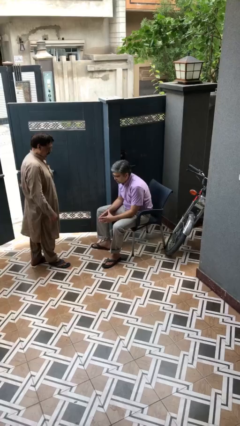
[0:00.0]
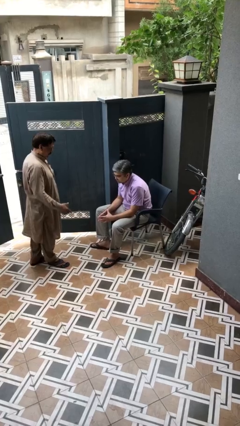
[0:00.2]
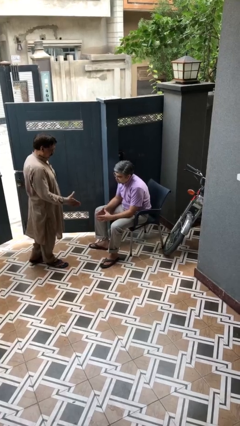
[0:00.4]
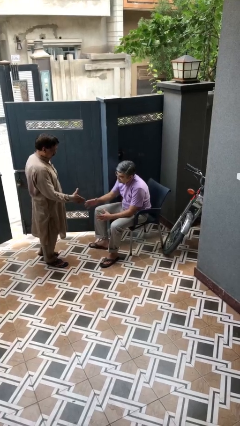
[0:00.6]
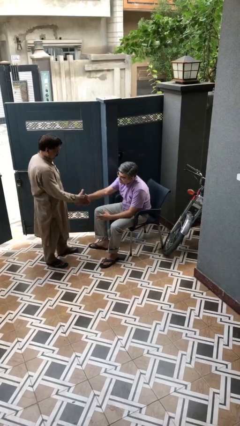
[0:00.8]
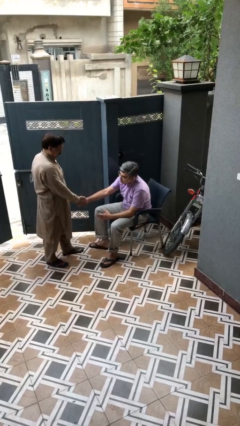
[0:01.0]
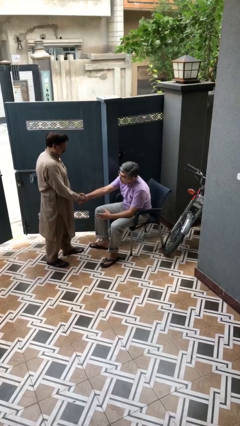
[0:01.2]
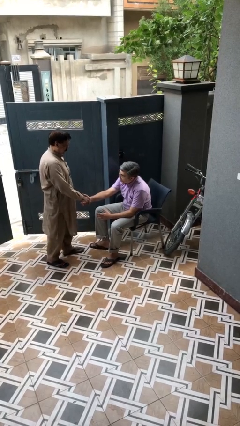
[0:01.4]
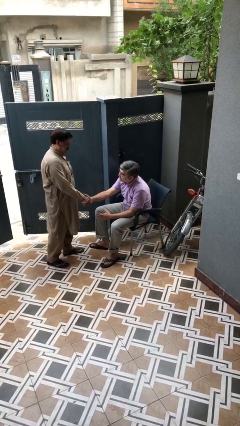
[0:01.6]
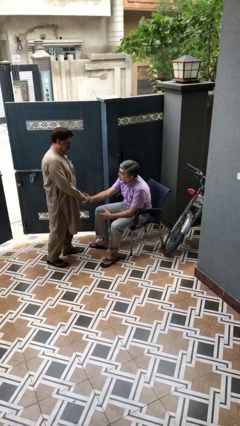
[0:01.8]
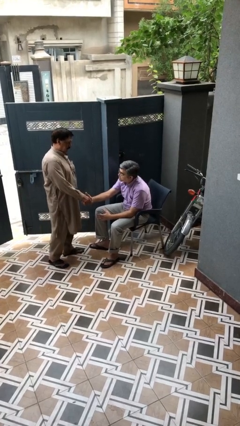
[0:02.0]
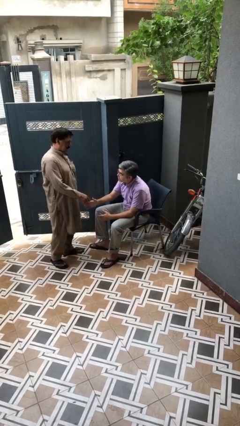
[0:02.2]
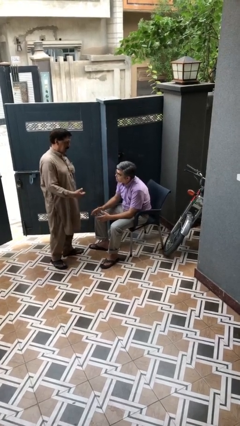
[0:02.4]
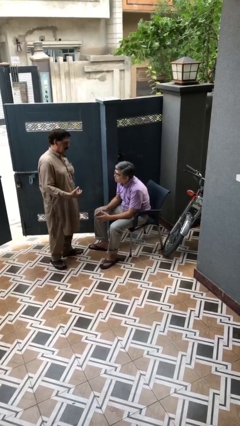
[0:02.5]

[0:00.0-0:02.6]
person shakes hand

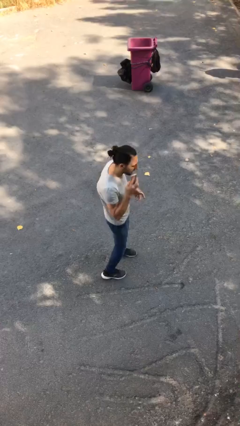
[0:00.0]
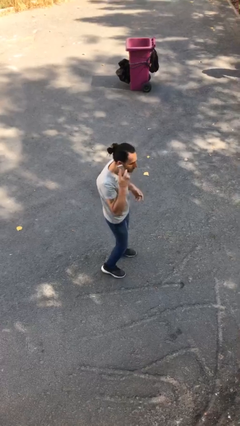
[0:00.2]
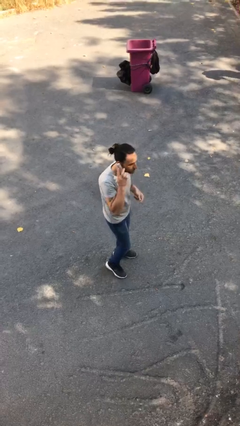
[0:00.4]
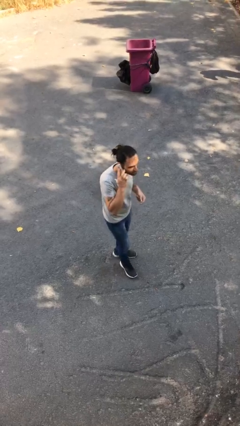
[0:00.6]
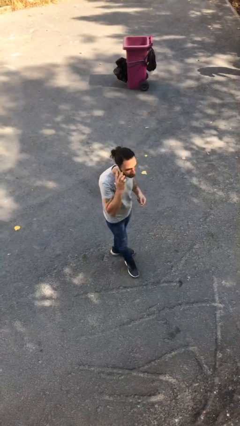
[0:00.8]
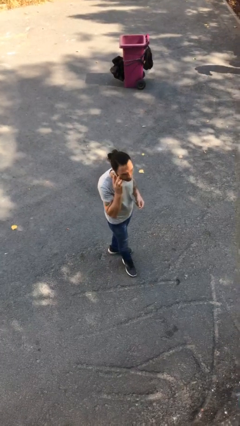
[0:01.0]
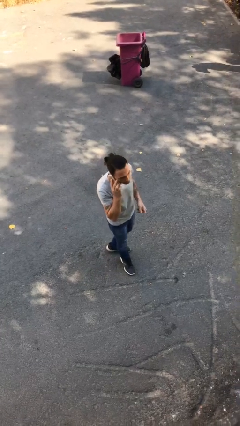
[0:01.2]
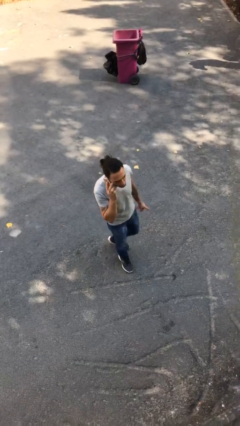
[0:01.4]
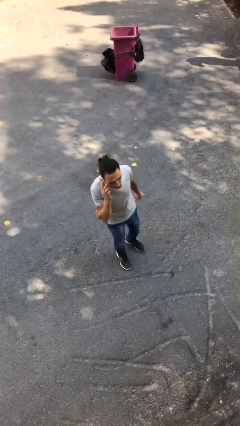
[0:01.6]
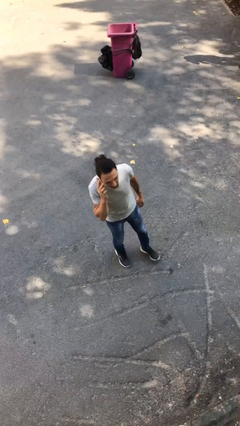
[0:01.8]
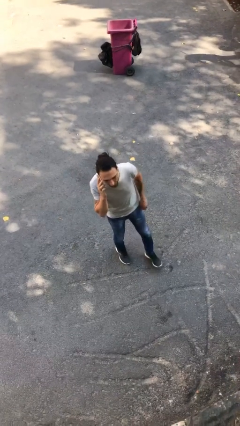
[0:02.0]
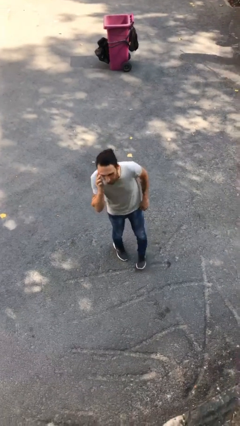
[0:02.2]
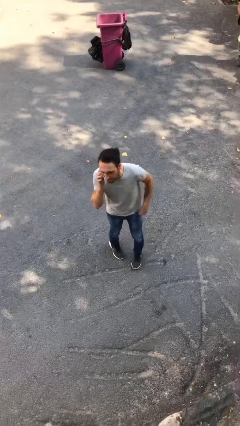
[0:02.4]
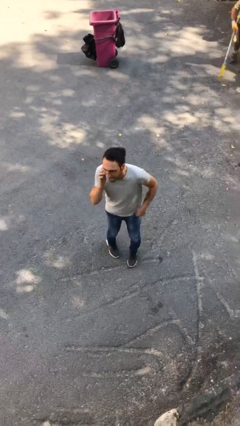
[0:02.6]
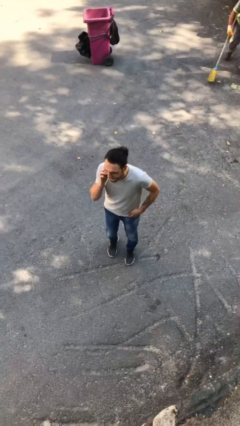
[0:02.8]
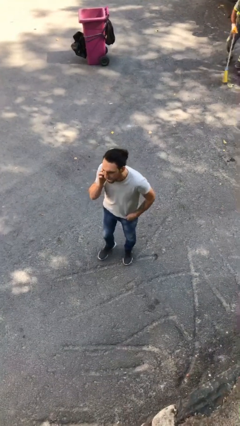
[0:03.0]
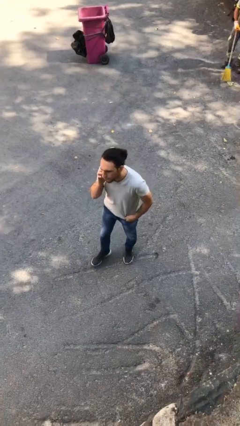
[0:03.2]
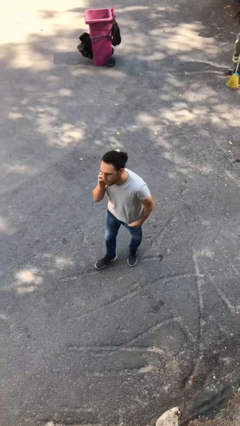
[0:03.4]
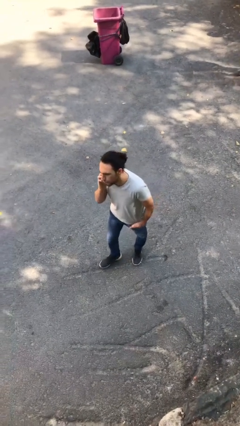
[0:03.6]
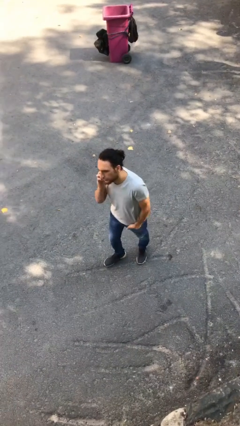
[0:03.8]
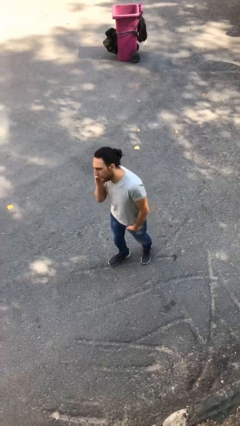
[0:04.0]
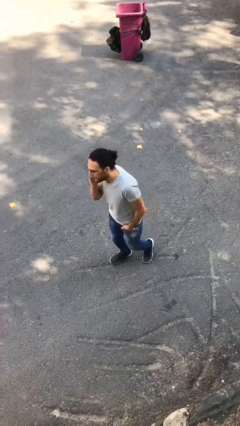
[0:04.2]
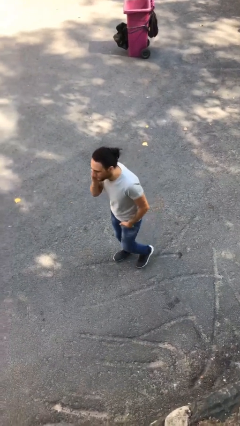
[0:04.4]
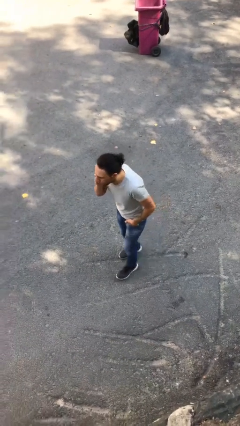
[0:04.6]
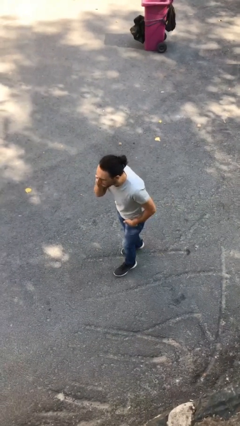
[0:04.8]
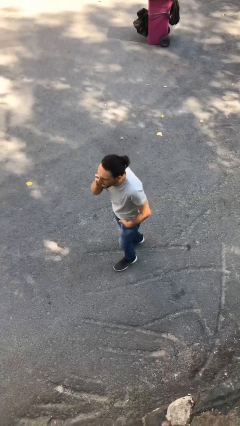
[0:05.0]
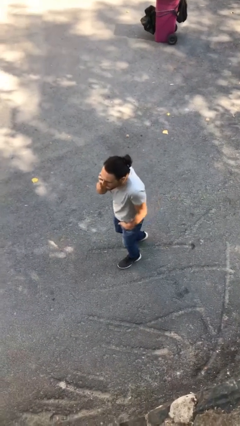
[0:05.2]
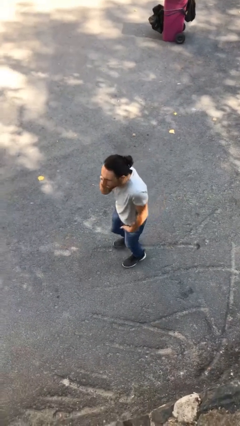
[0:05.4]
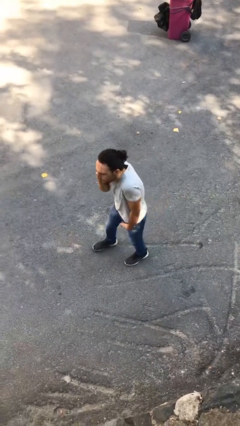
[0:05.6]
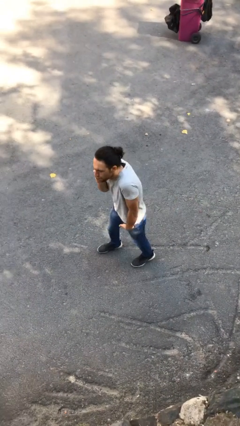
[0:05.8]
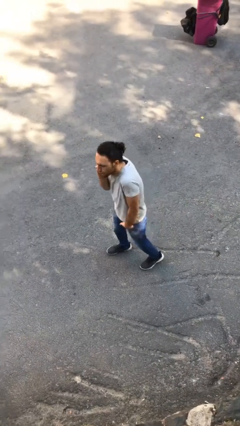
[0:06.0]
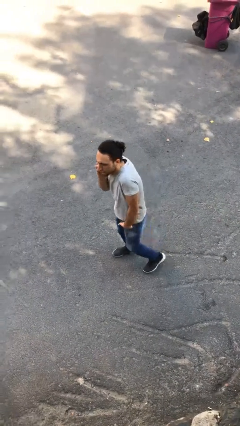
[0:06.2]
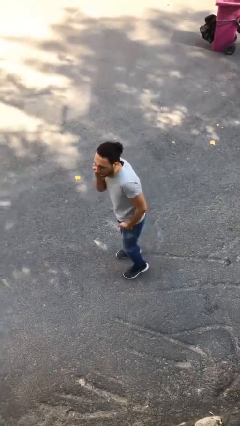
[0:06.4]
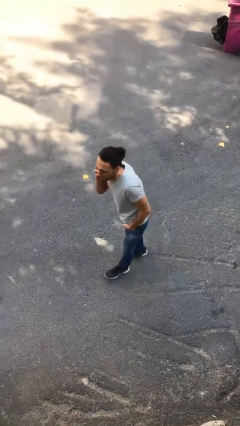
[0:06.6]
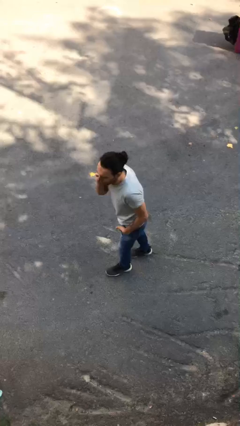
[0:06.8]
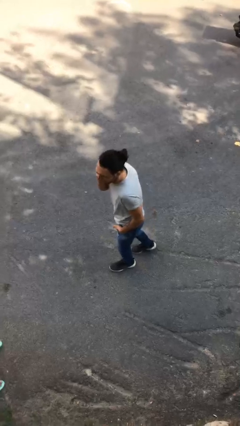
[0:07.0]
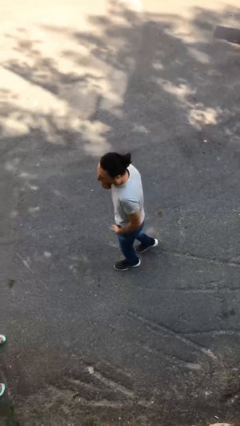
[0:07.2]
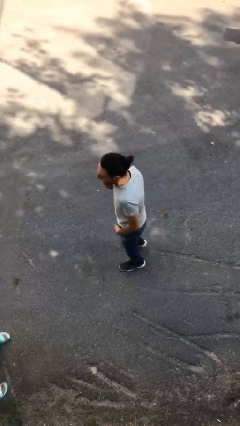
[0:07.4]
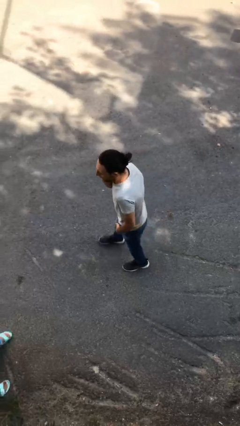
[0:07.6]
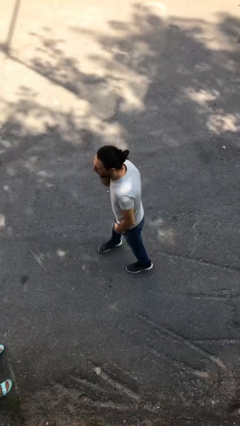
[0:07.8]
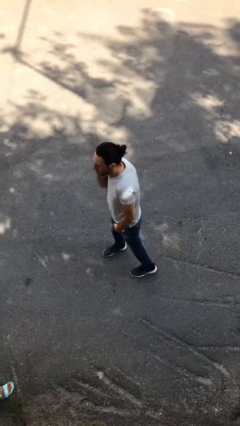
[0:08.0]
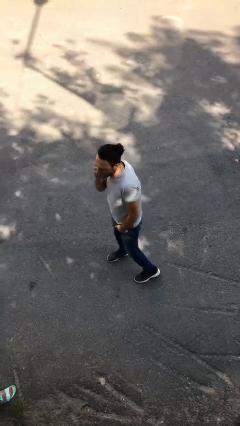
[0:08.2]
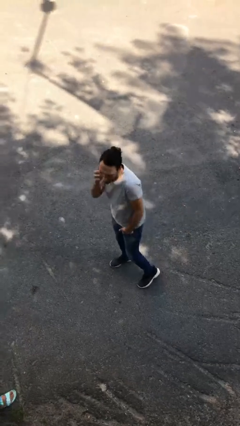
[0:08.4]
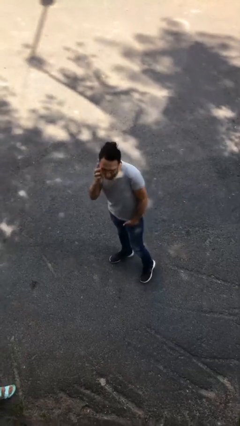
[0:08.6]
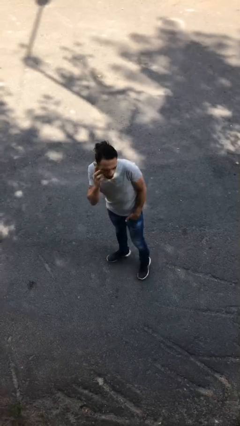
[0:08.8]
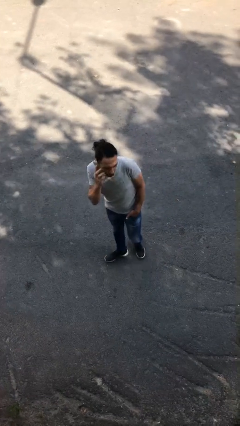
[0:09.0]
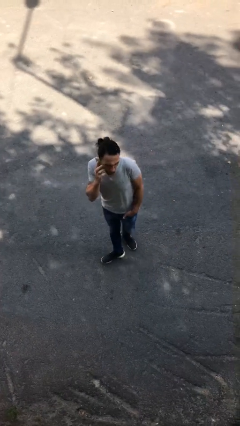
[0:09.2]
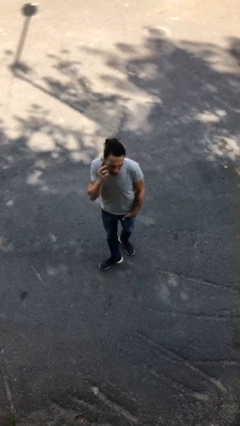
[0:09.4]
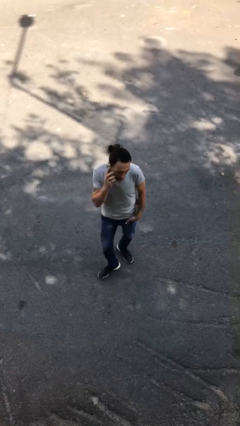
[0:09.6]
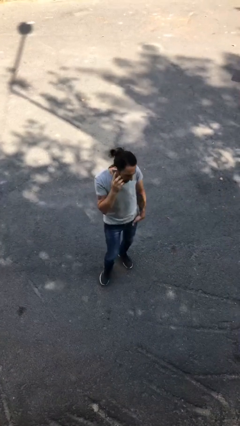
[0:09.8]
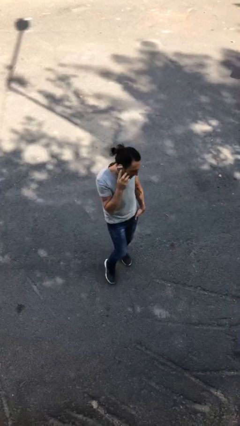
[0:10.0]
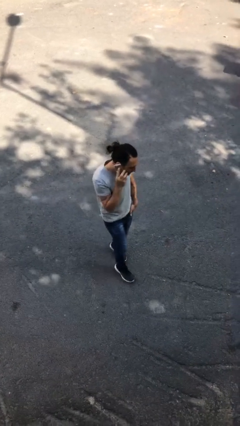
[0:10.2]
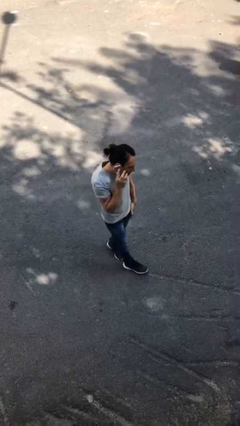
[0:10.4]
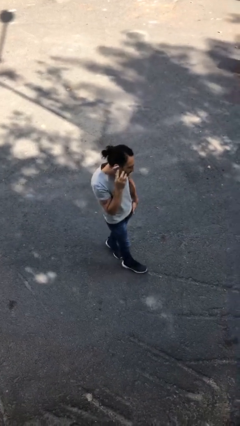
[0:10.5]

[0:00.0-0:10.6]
person talks on phone

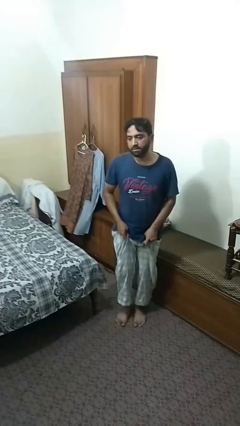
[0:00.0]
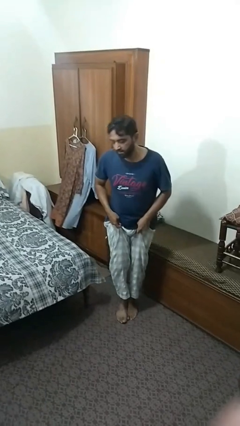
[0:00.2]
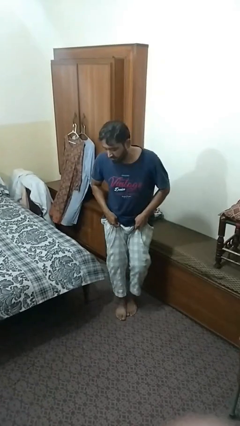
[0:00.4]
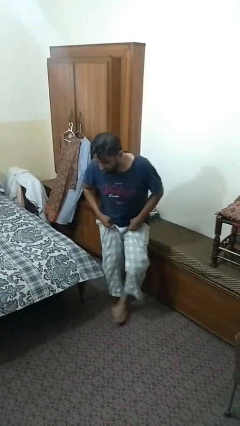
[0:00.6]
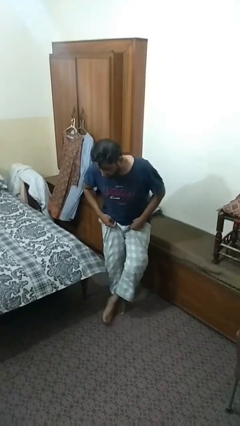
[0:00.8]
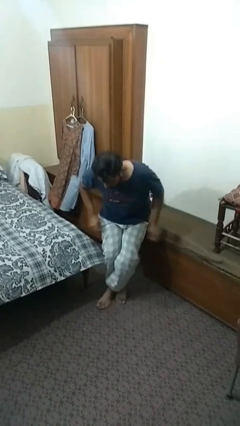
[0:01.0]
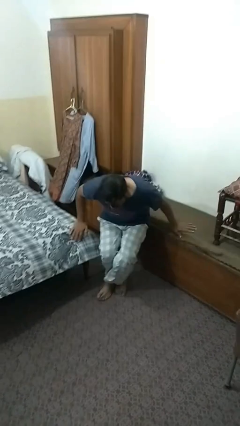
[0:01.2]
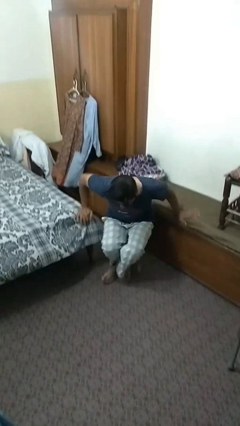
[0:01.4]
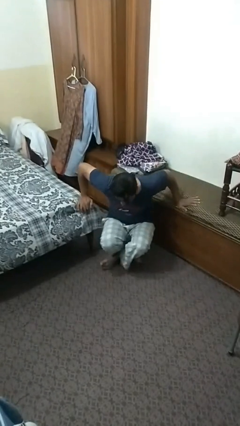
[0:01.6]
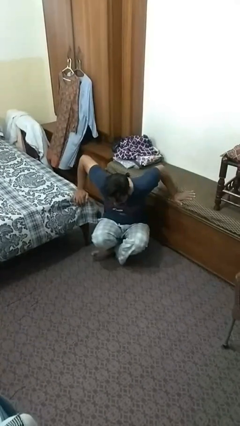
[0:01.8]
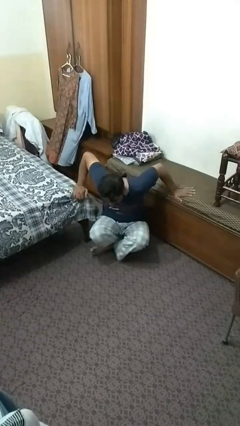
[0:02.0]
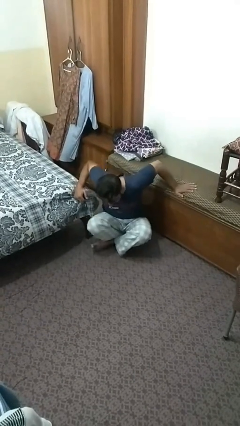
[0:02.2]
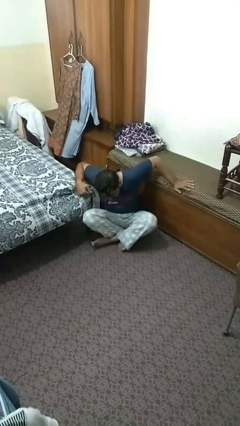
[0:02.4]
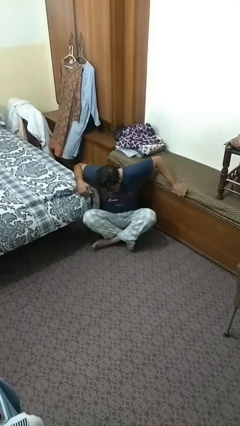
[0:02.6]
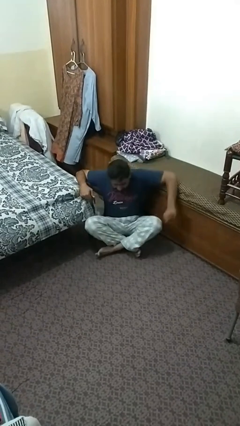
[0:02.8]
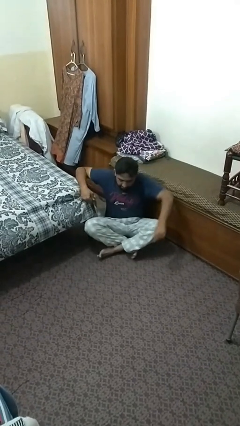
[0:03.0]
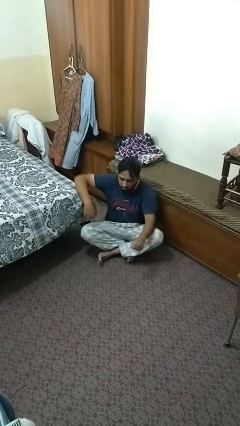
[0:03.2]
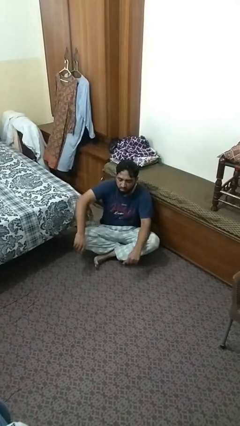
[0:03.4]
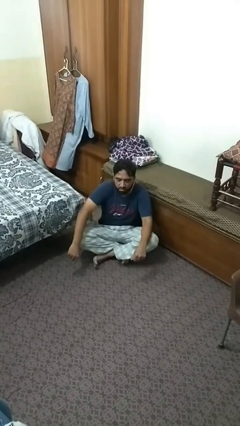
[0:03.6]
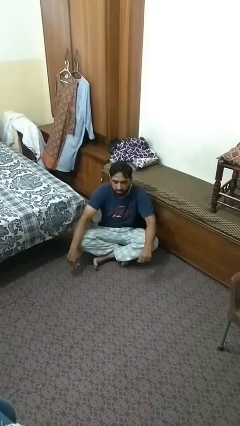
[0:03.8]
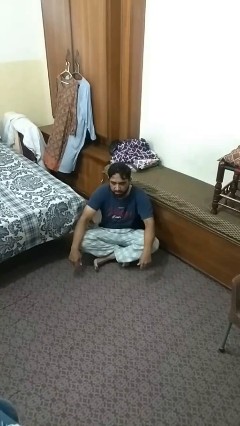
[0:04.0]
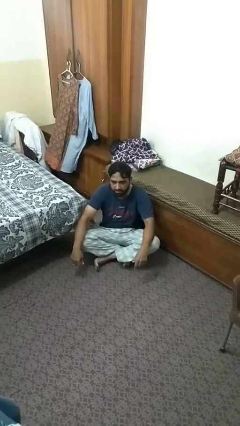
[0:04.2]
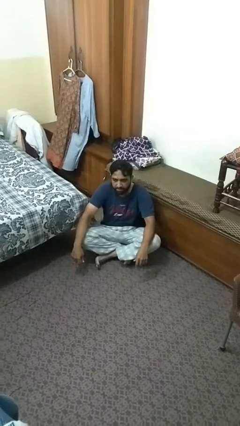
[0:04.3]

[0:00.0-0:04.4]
person sits crisscross

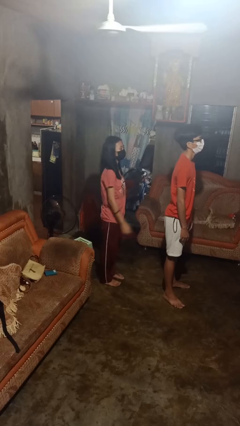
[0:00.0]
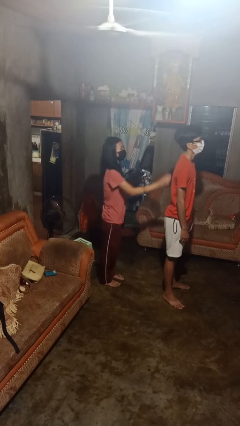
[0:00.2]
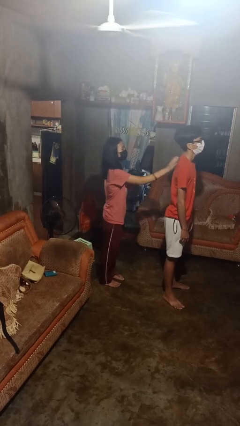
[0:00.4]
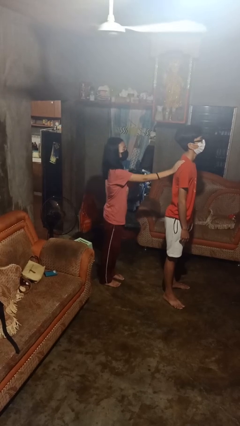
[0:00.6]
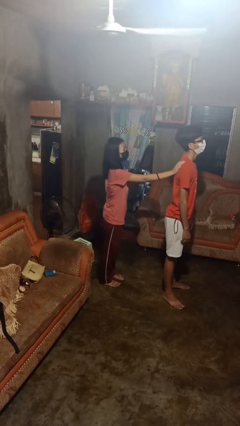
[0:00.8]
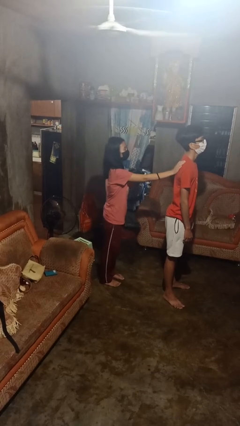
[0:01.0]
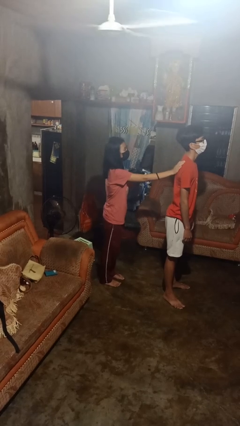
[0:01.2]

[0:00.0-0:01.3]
person touches back of person
